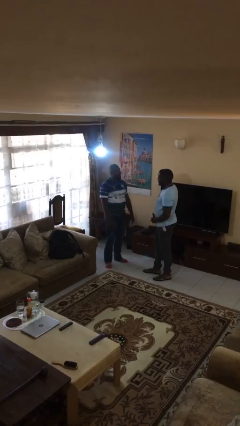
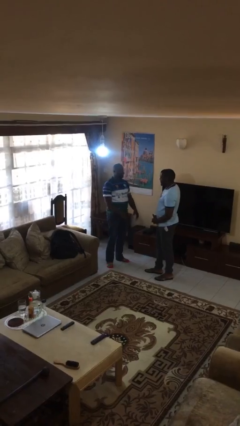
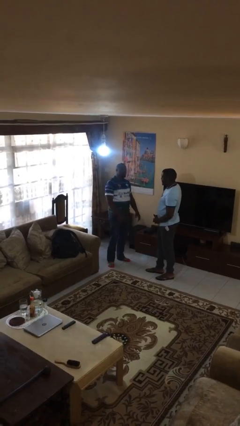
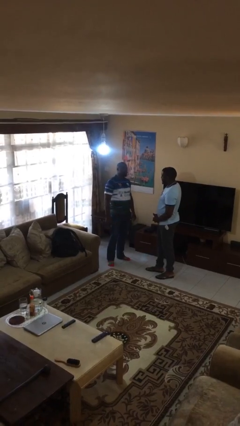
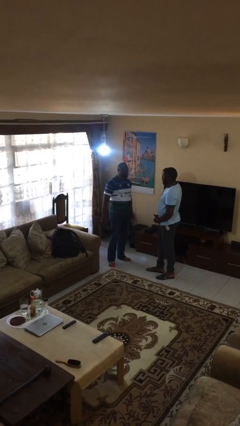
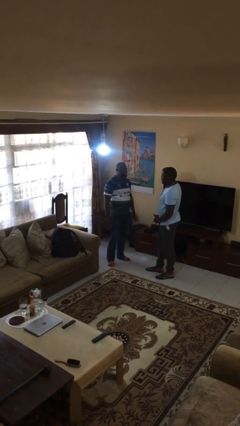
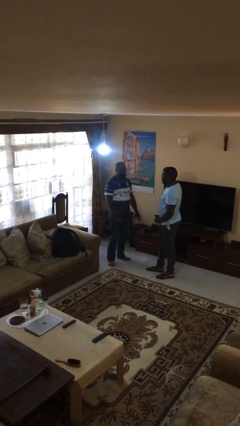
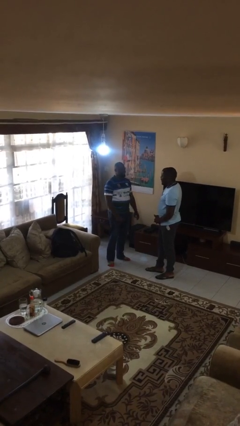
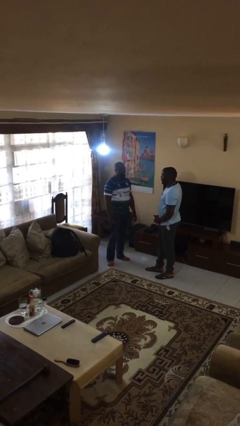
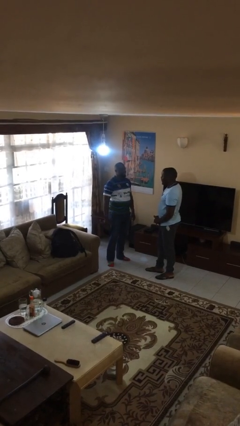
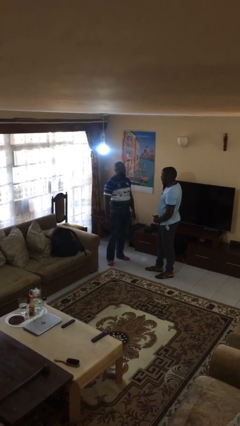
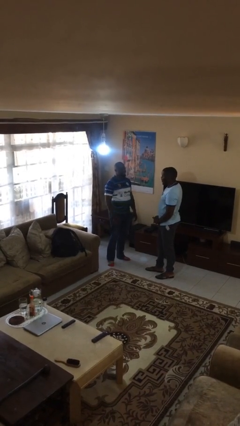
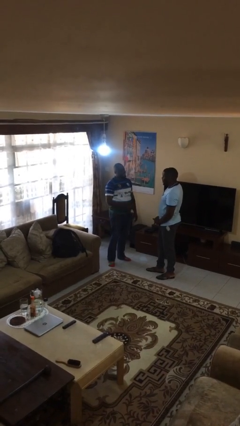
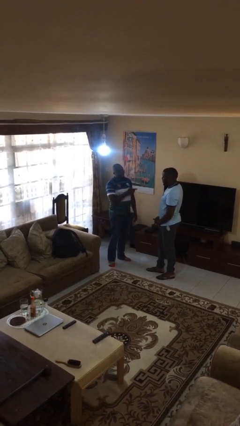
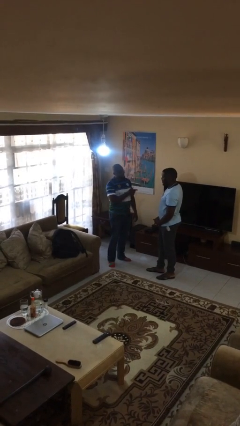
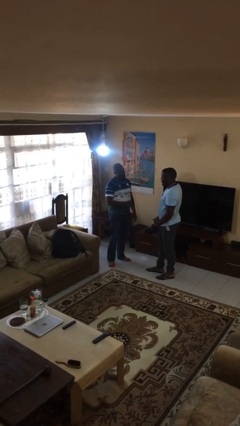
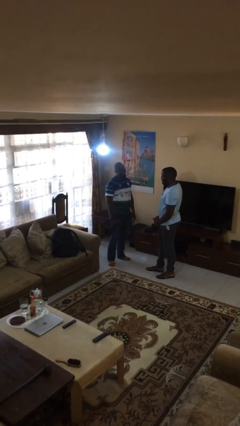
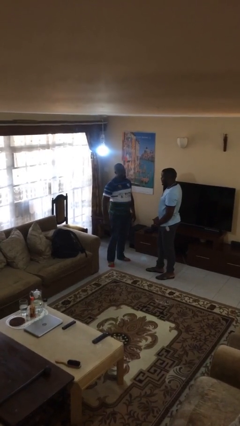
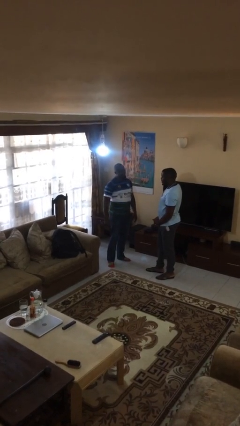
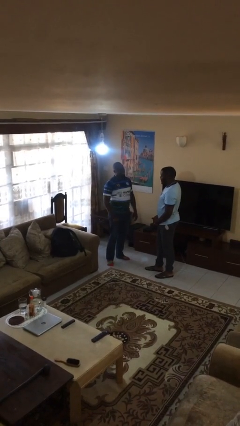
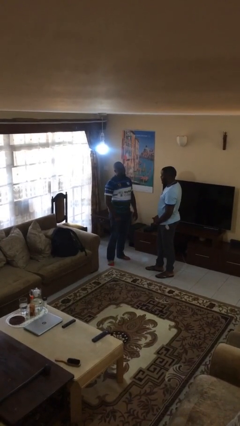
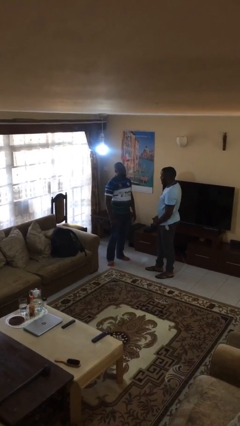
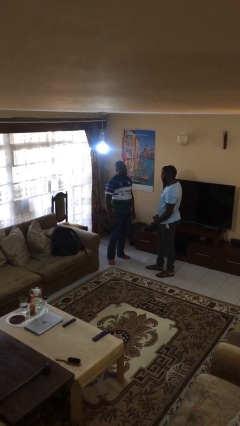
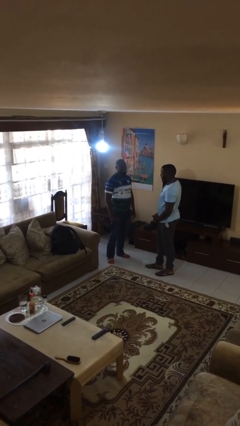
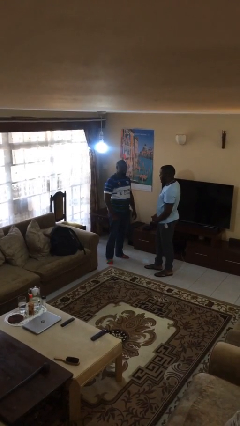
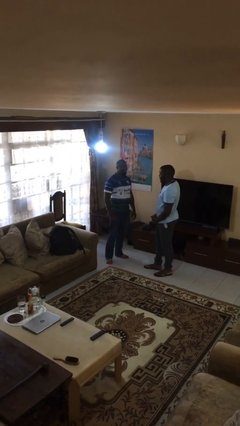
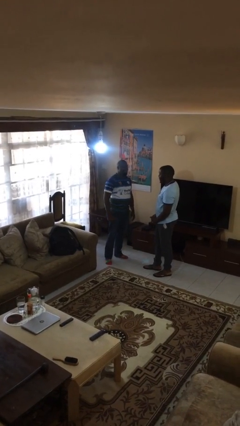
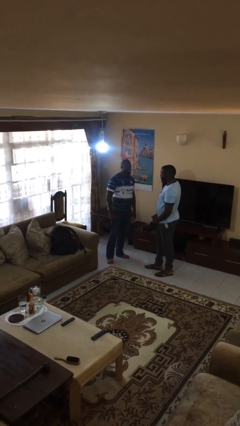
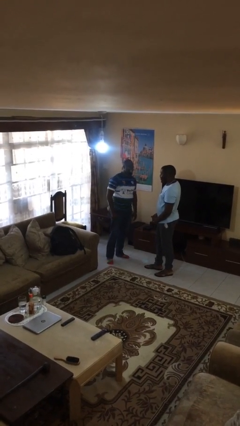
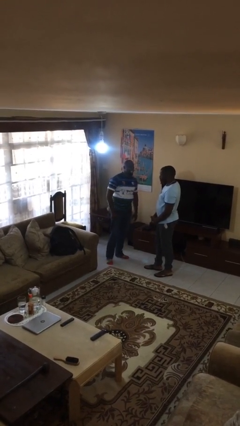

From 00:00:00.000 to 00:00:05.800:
person talks to person

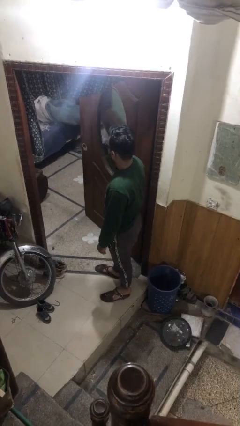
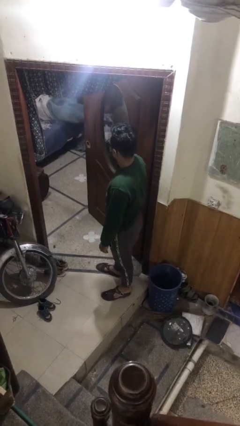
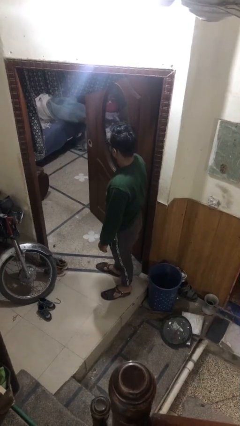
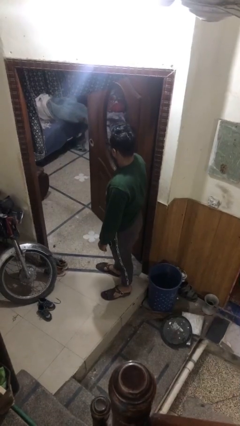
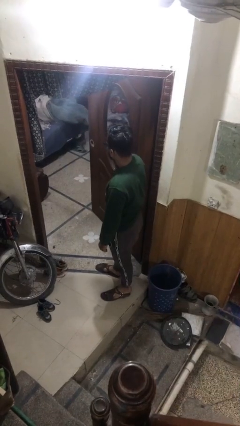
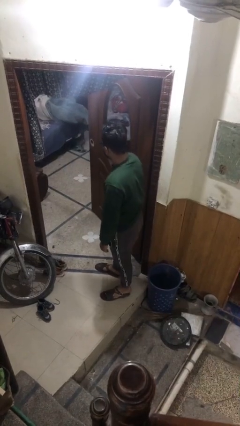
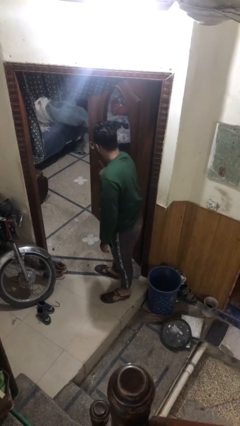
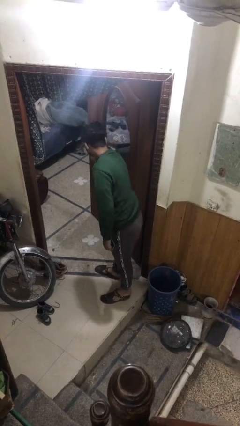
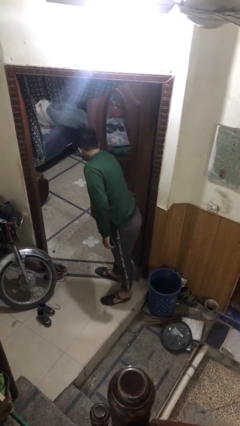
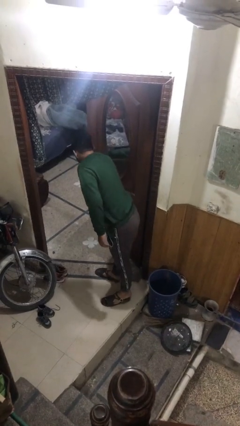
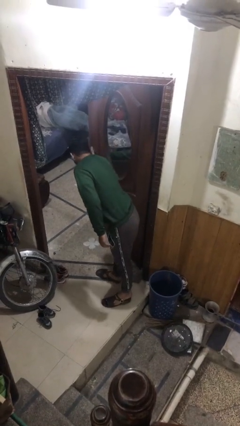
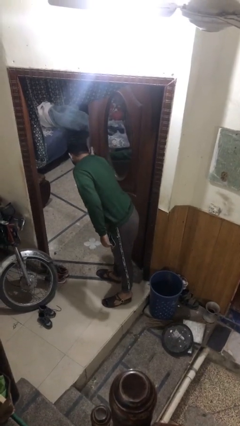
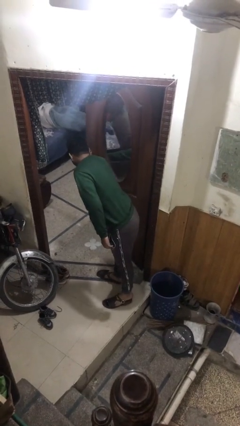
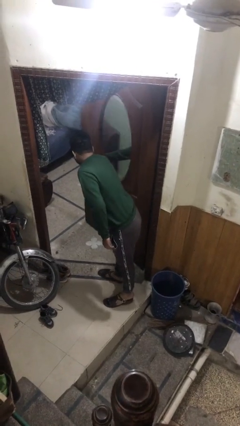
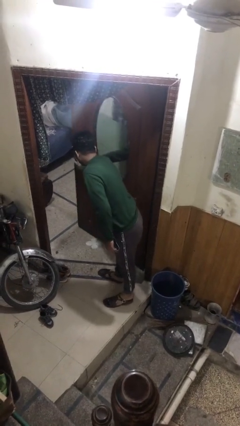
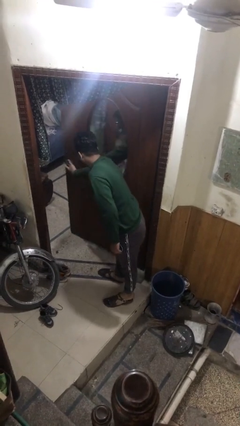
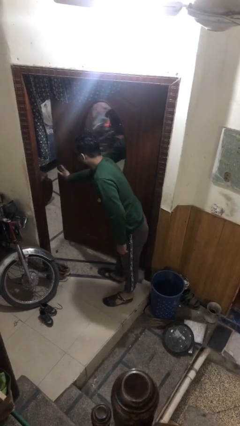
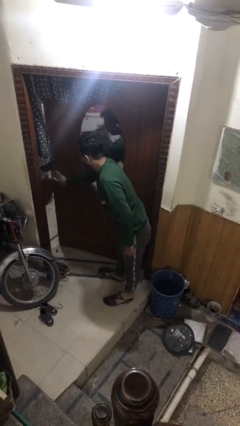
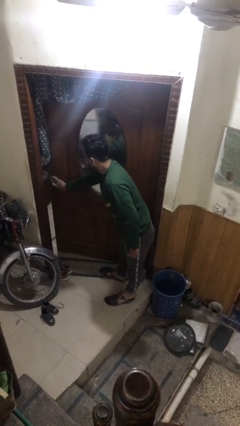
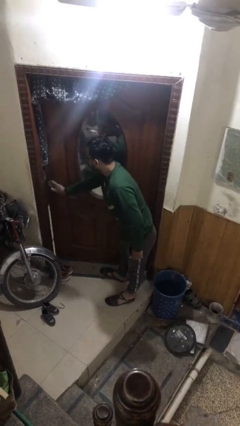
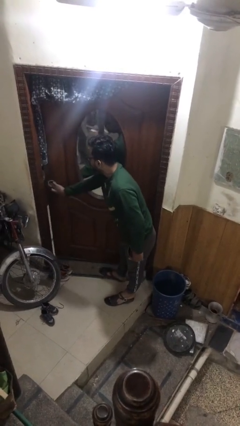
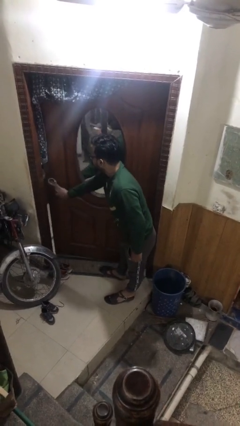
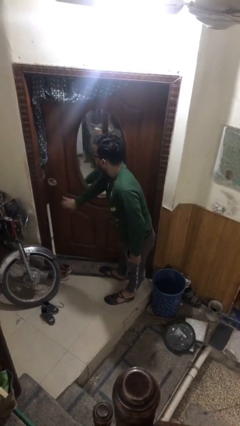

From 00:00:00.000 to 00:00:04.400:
person closes facility door

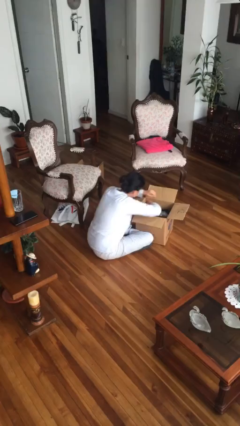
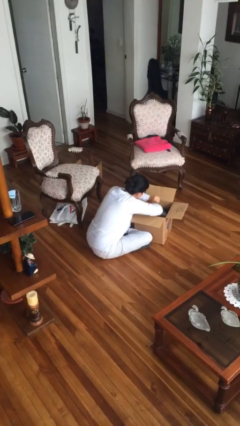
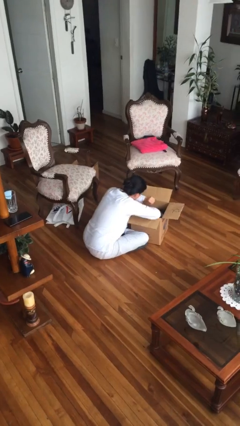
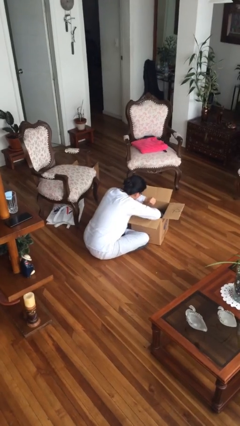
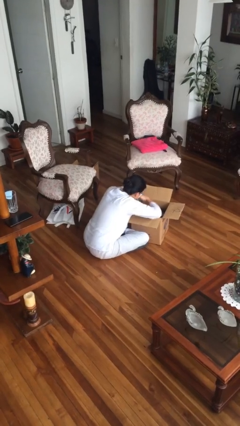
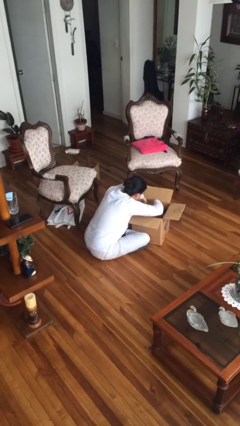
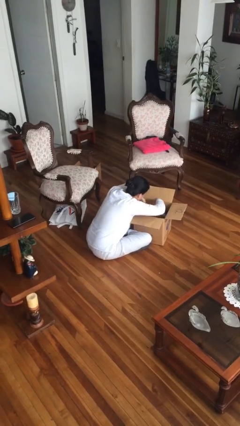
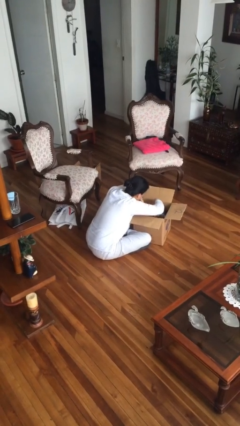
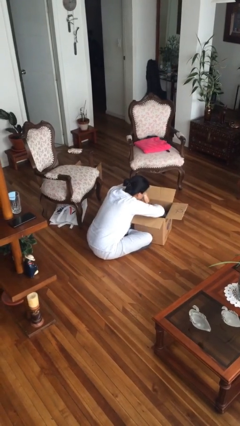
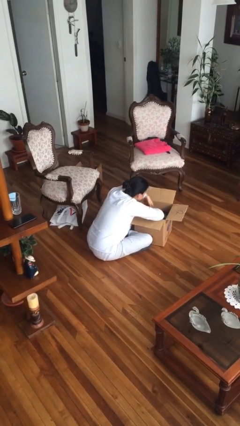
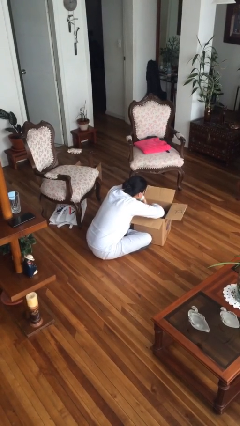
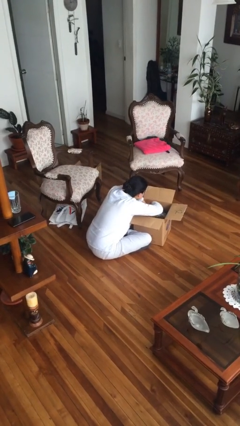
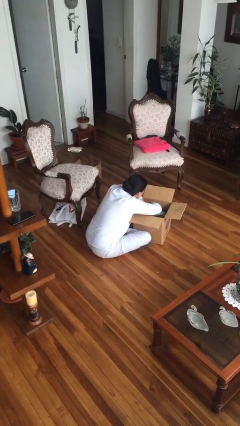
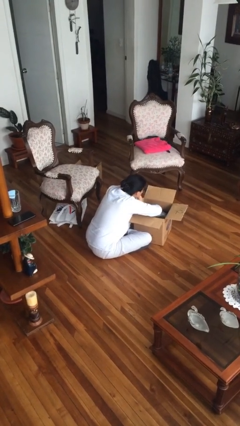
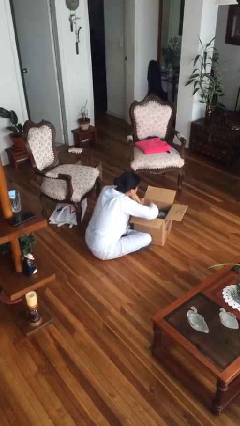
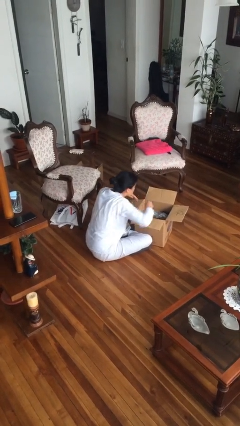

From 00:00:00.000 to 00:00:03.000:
person searches in box

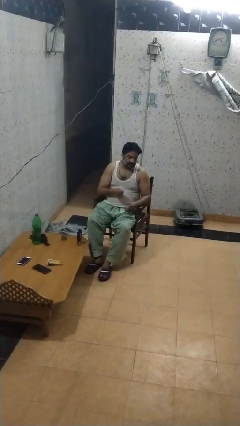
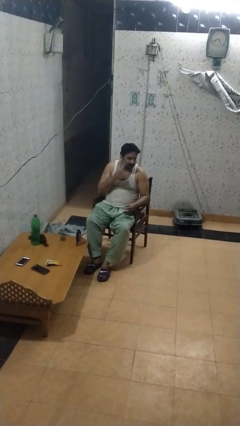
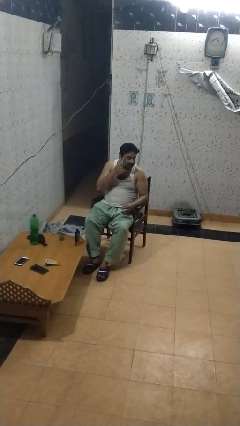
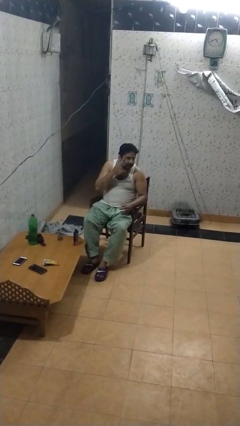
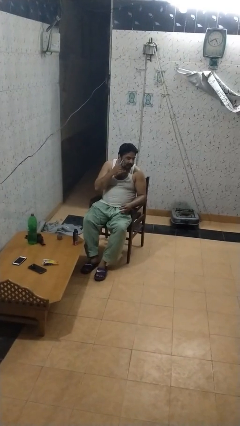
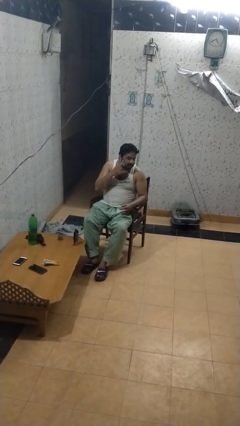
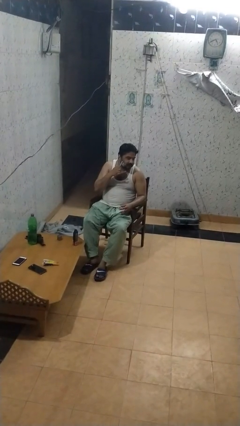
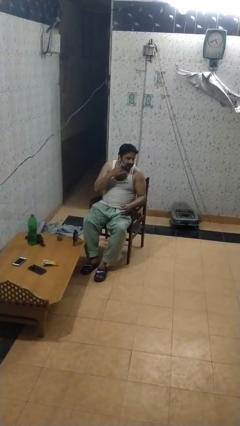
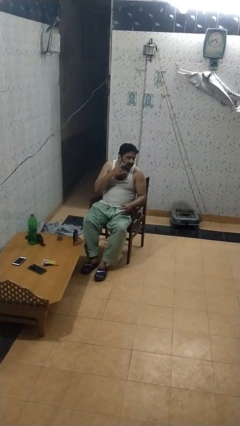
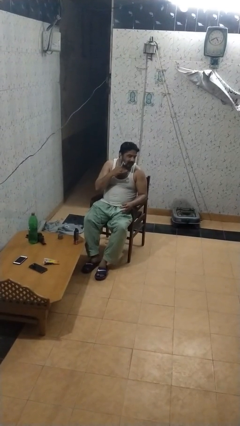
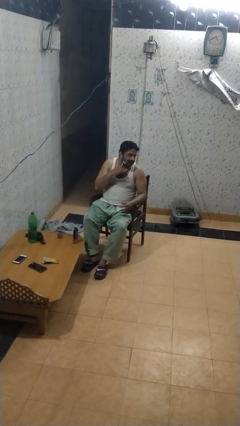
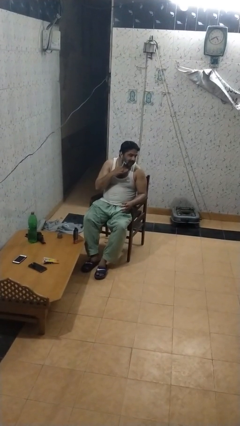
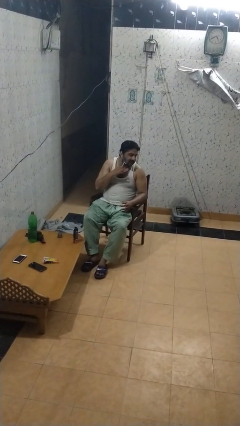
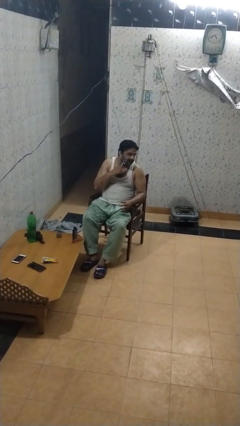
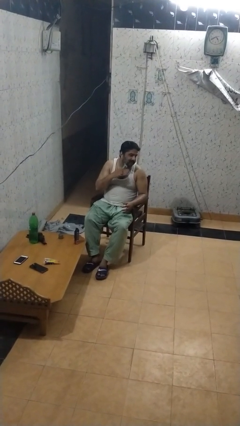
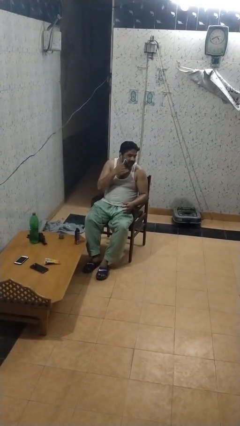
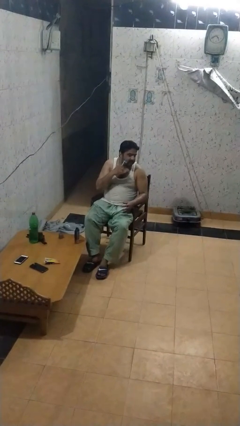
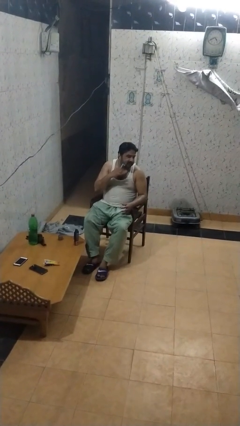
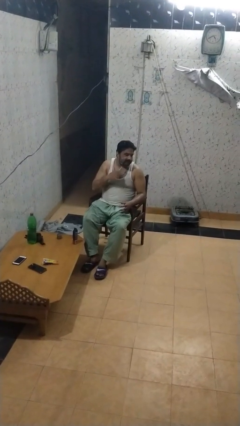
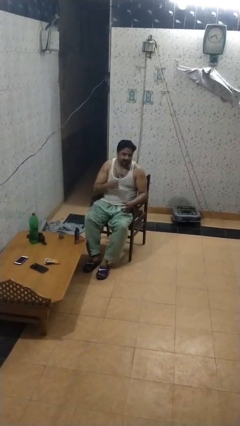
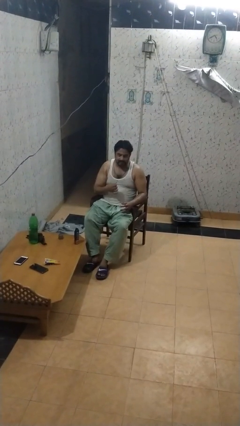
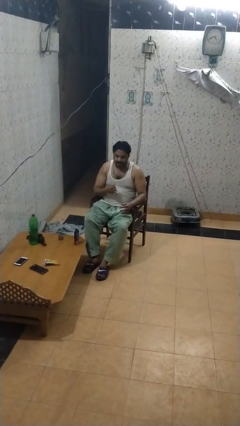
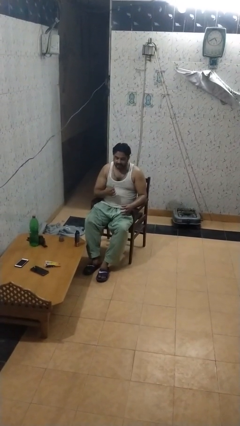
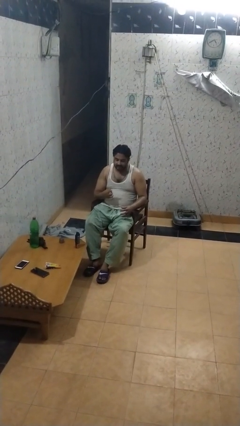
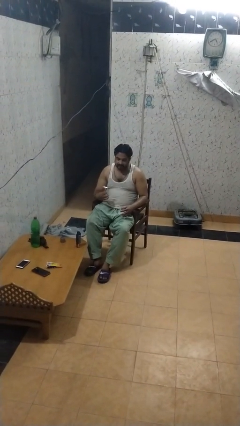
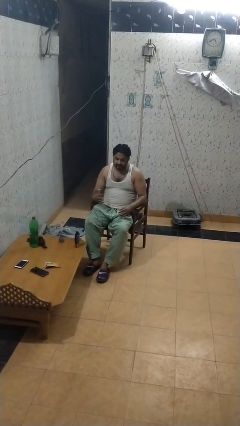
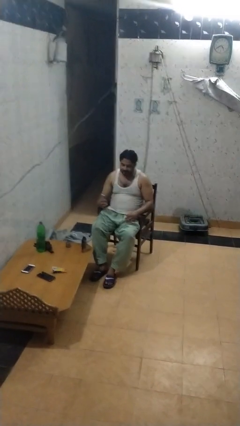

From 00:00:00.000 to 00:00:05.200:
person shaves face
